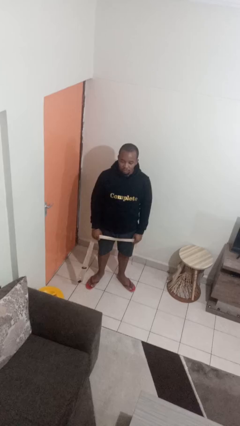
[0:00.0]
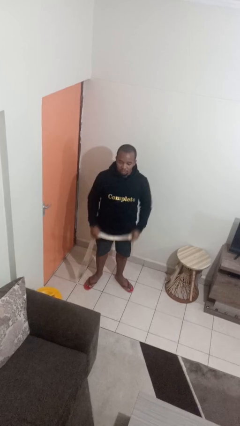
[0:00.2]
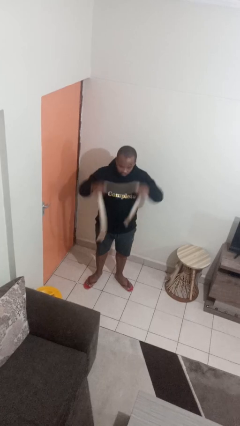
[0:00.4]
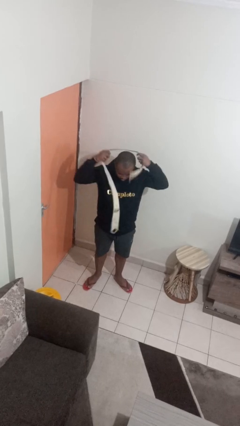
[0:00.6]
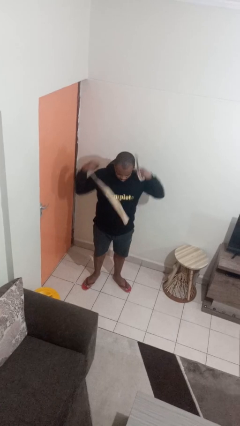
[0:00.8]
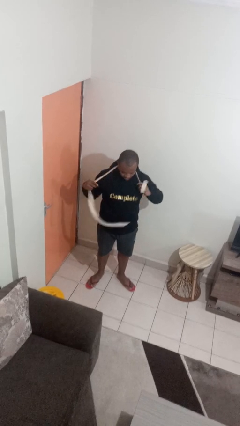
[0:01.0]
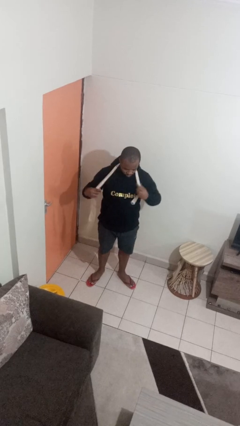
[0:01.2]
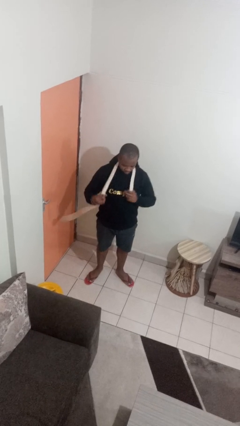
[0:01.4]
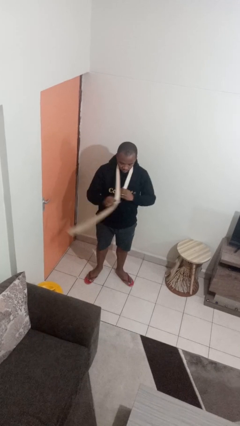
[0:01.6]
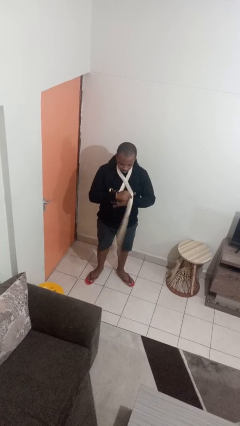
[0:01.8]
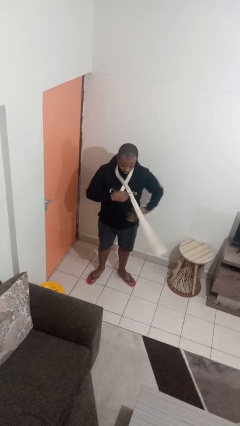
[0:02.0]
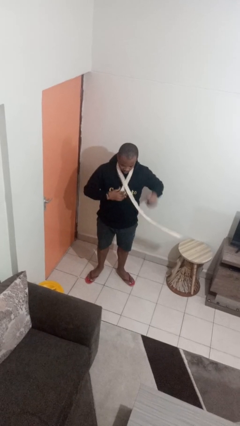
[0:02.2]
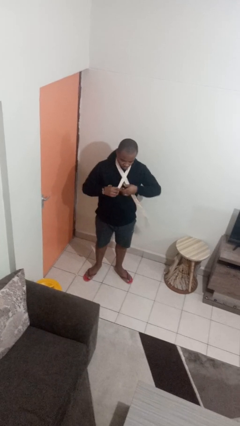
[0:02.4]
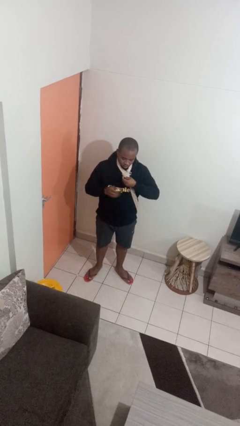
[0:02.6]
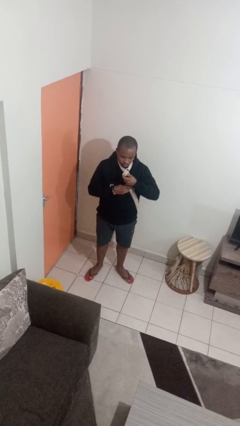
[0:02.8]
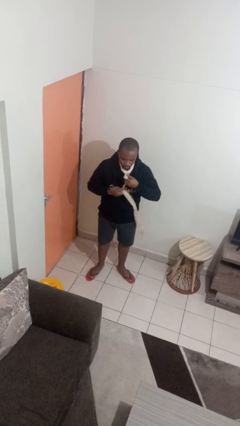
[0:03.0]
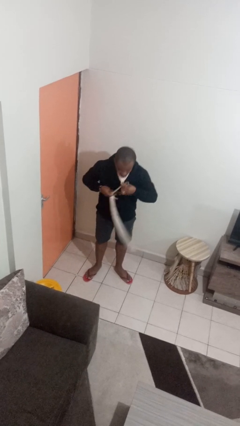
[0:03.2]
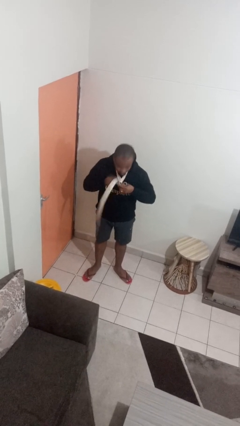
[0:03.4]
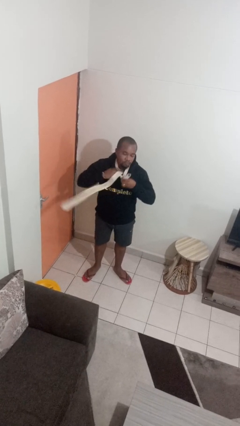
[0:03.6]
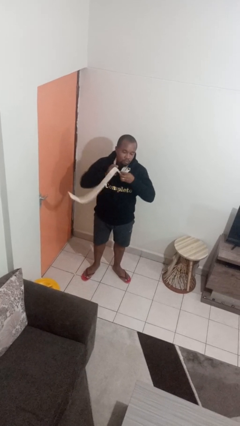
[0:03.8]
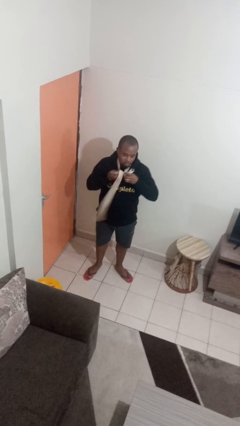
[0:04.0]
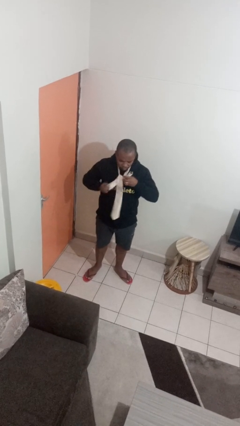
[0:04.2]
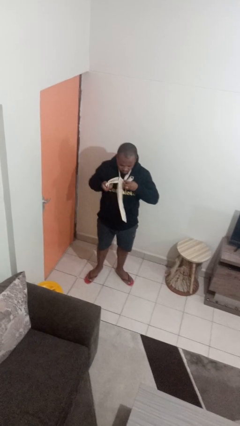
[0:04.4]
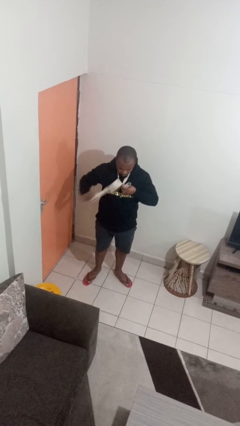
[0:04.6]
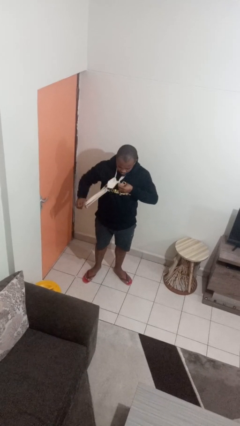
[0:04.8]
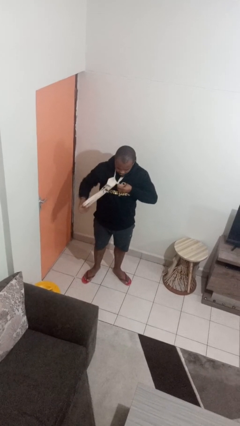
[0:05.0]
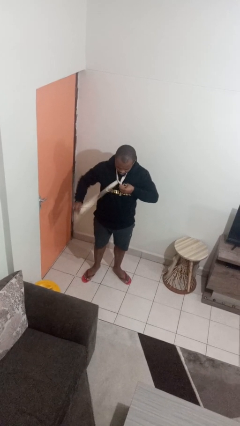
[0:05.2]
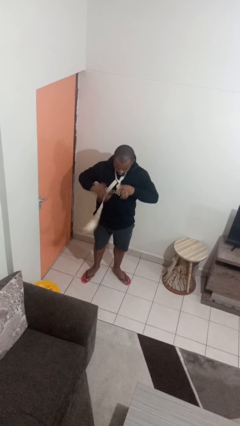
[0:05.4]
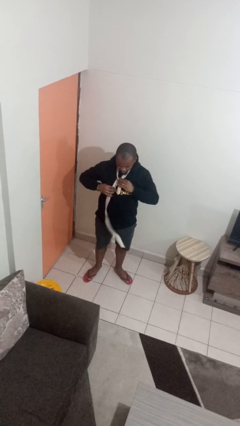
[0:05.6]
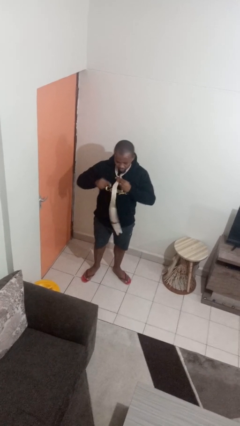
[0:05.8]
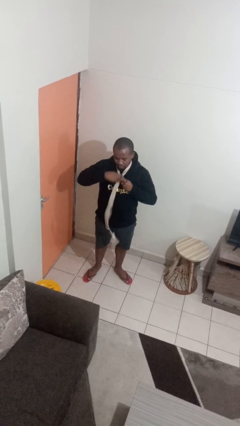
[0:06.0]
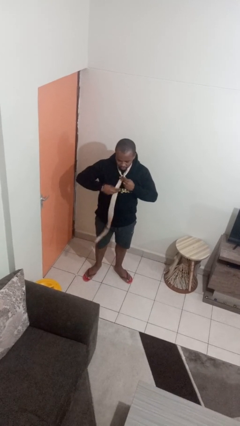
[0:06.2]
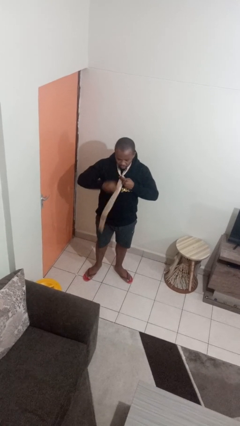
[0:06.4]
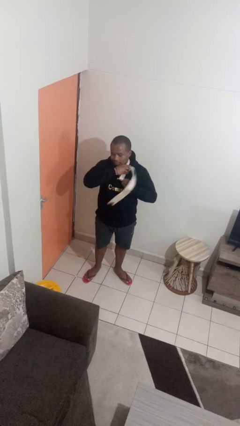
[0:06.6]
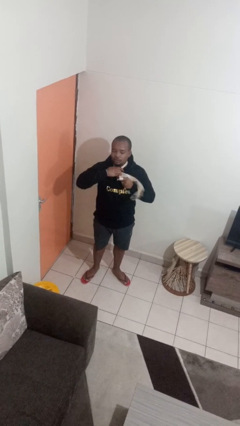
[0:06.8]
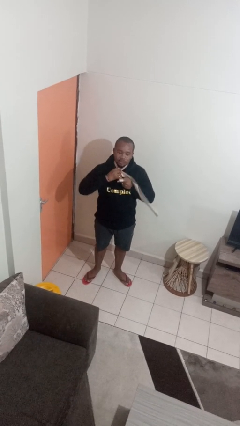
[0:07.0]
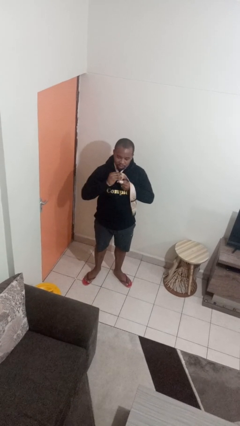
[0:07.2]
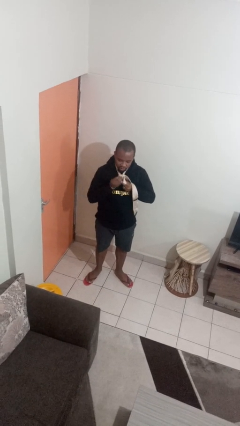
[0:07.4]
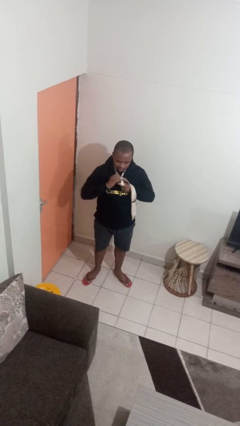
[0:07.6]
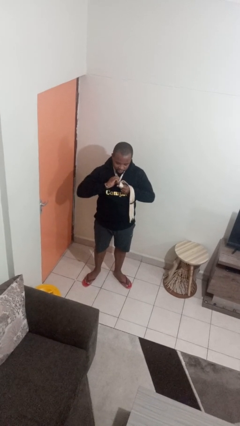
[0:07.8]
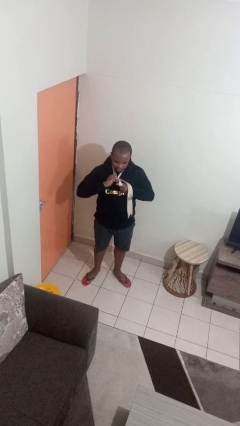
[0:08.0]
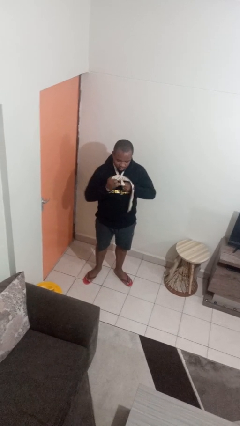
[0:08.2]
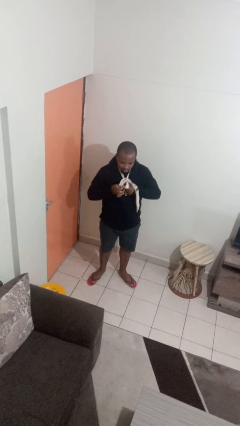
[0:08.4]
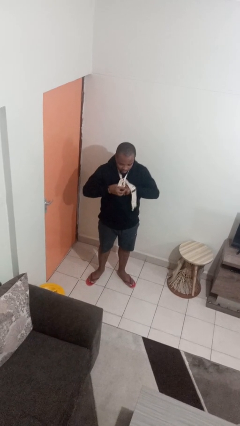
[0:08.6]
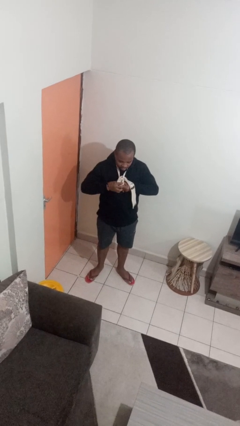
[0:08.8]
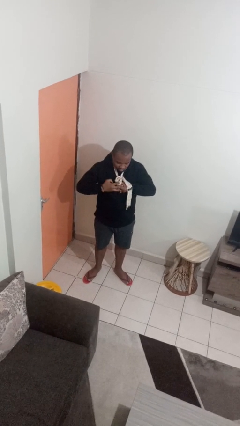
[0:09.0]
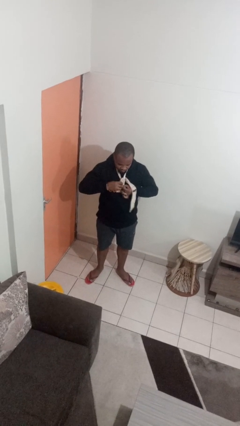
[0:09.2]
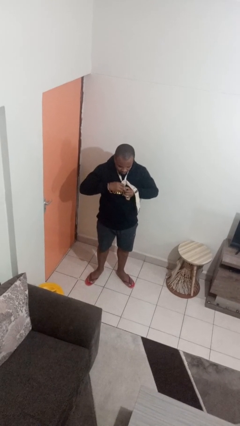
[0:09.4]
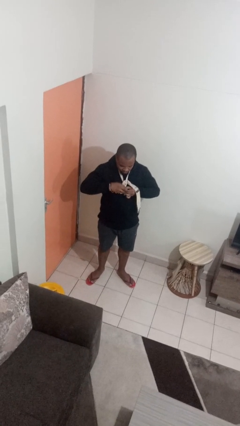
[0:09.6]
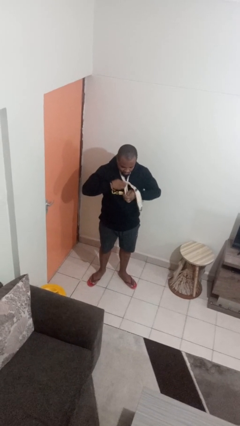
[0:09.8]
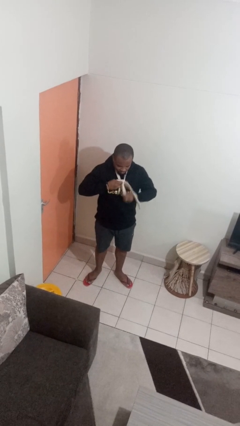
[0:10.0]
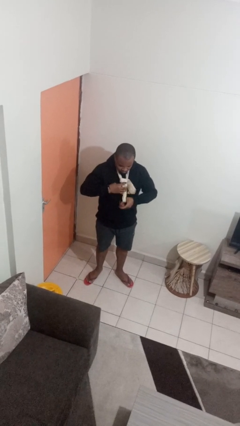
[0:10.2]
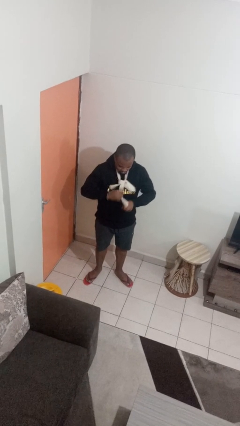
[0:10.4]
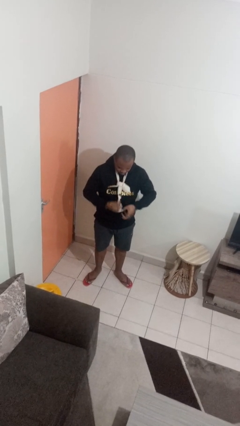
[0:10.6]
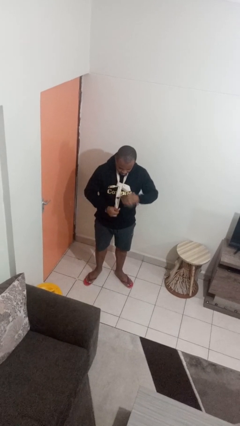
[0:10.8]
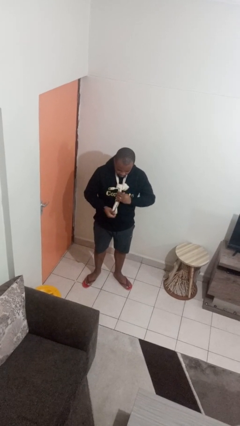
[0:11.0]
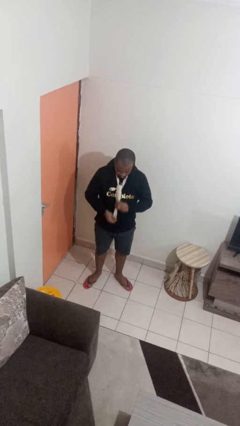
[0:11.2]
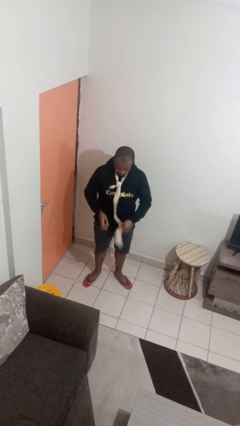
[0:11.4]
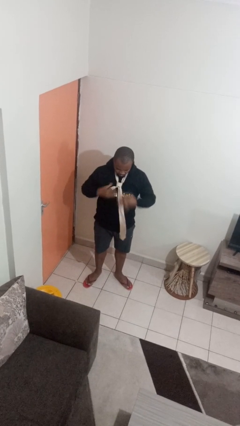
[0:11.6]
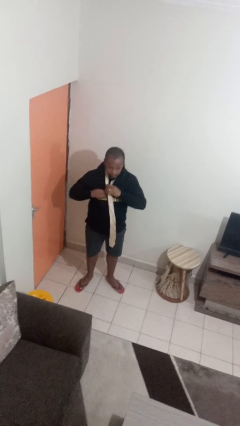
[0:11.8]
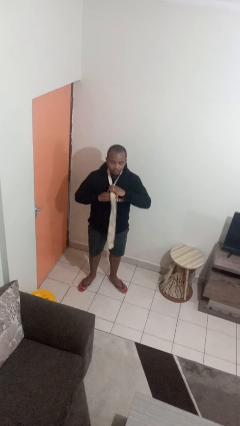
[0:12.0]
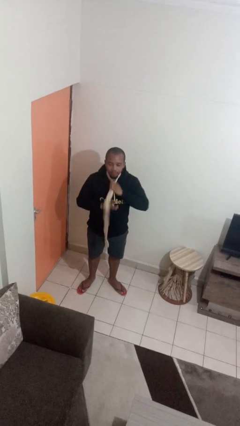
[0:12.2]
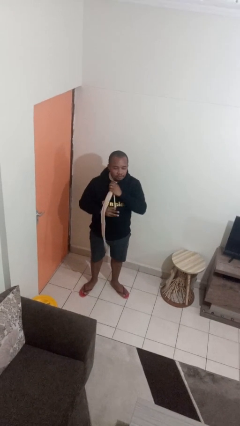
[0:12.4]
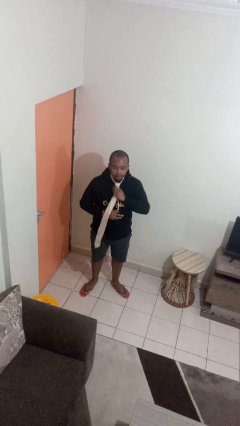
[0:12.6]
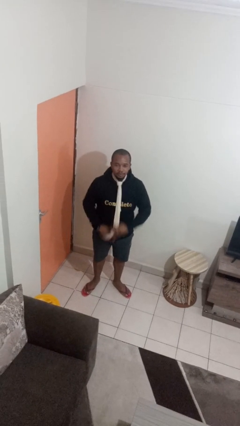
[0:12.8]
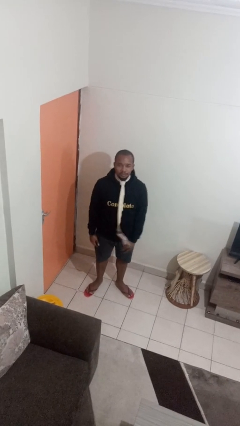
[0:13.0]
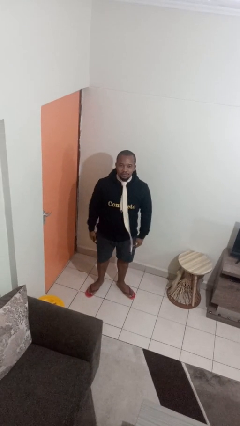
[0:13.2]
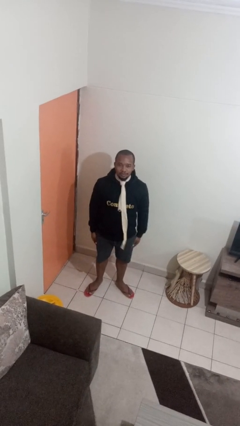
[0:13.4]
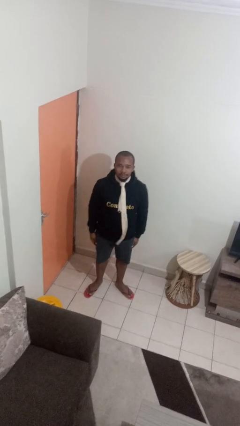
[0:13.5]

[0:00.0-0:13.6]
person puts on necktie

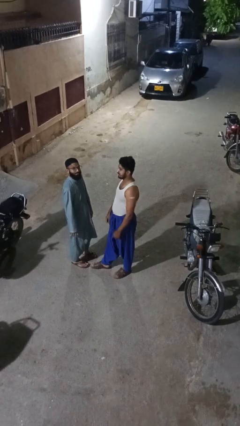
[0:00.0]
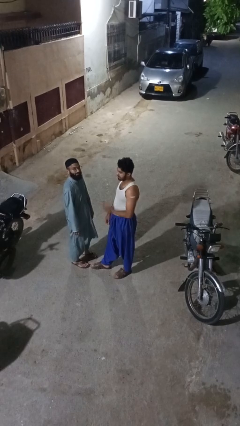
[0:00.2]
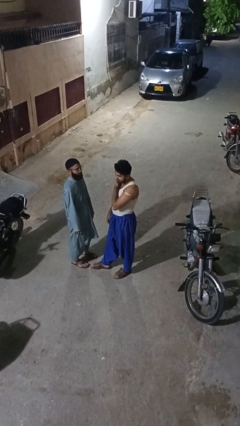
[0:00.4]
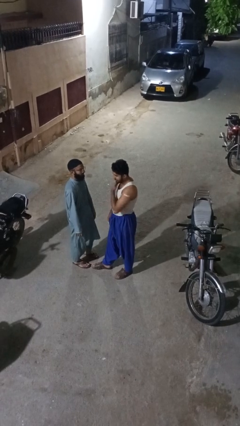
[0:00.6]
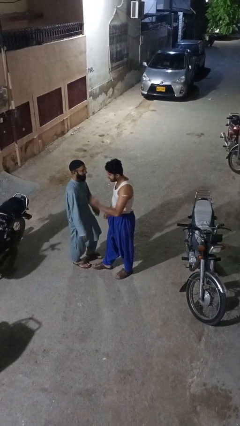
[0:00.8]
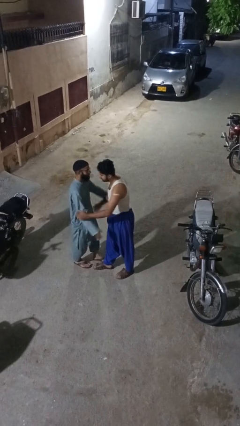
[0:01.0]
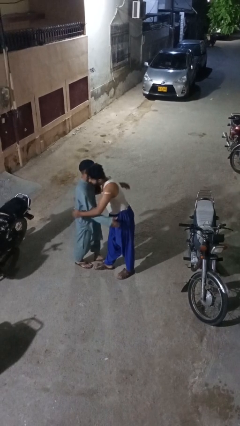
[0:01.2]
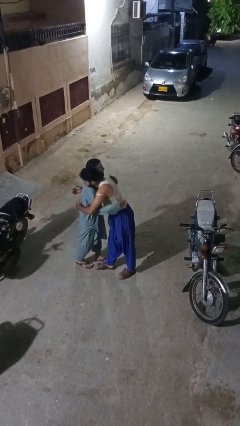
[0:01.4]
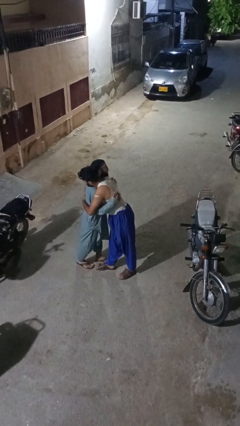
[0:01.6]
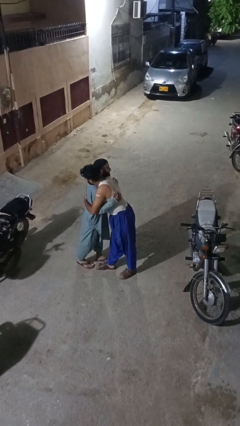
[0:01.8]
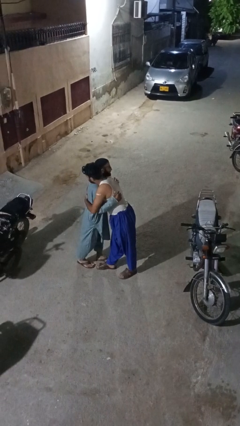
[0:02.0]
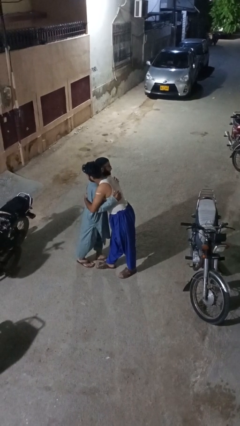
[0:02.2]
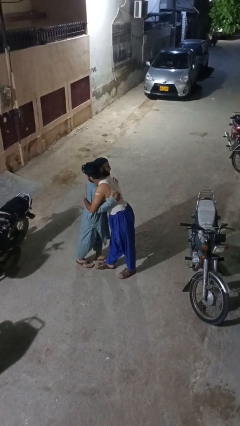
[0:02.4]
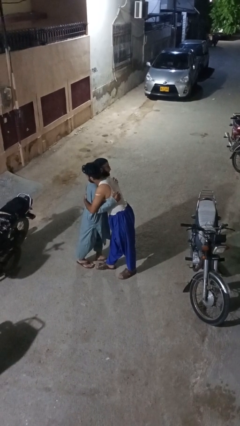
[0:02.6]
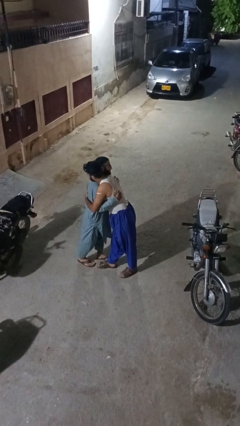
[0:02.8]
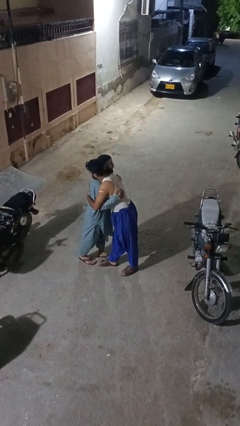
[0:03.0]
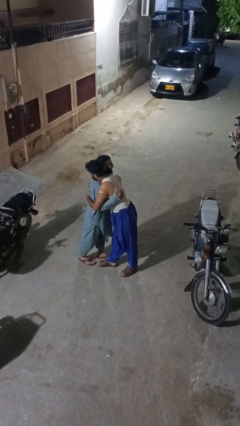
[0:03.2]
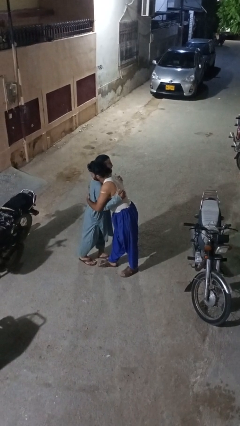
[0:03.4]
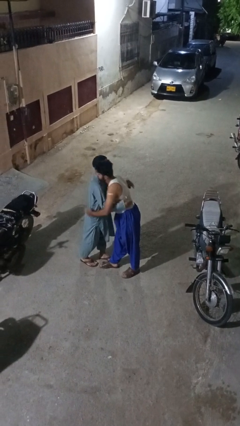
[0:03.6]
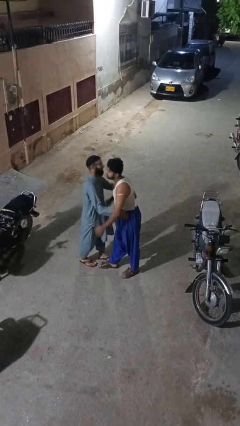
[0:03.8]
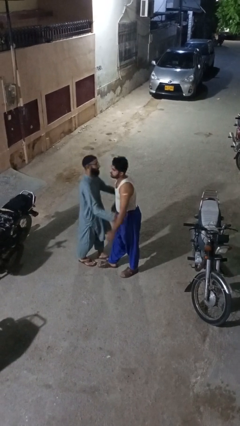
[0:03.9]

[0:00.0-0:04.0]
person kisses cheek of person
